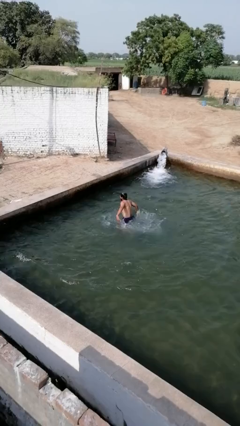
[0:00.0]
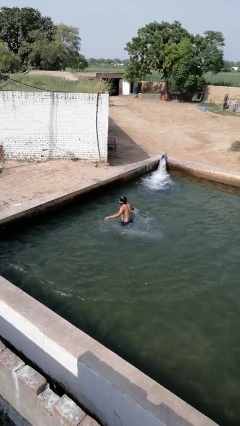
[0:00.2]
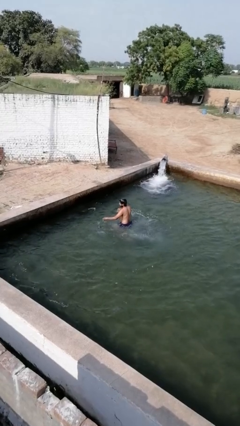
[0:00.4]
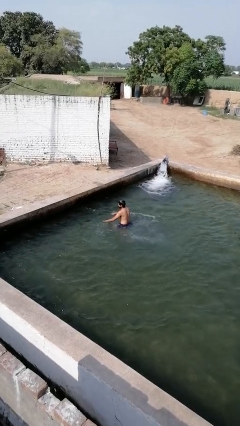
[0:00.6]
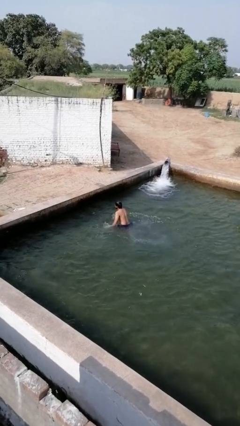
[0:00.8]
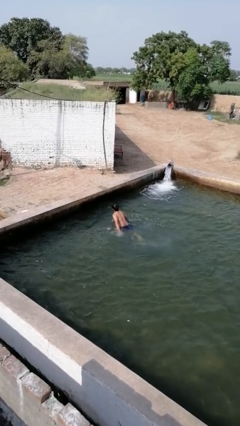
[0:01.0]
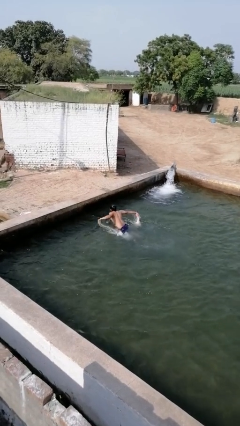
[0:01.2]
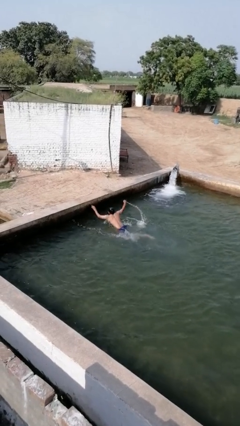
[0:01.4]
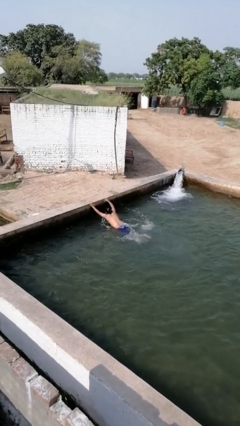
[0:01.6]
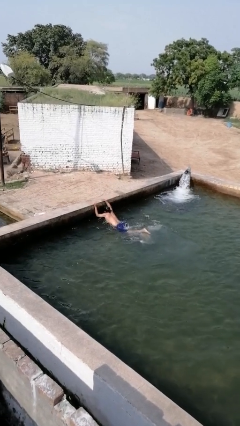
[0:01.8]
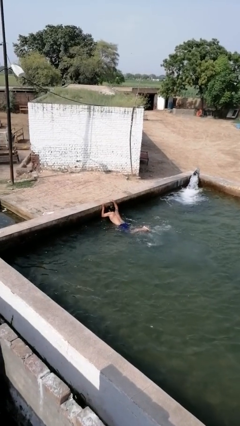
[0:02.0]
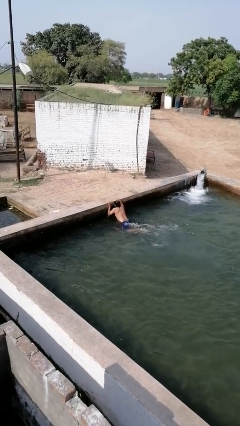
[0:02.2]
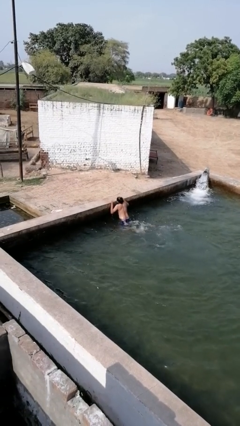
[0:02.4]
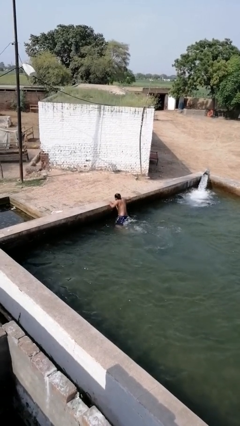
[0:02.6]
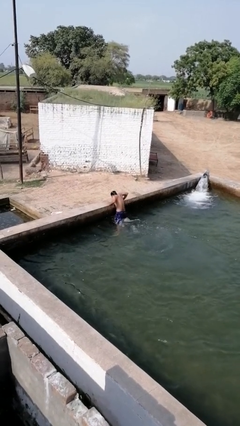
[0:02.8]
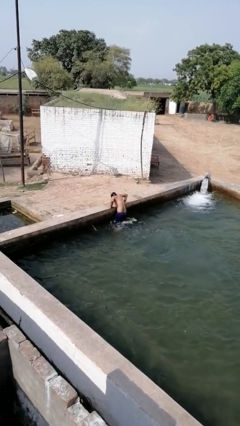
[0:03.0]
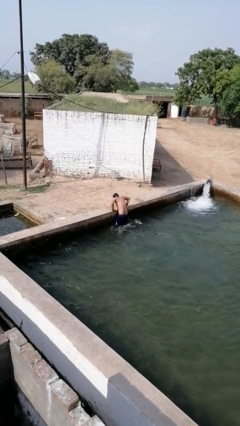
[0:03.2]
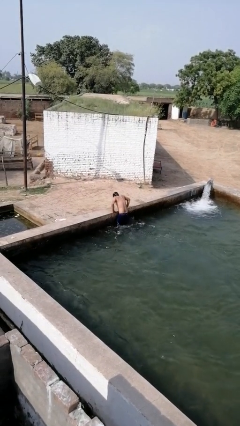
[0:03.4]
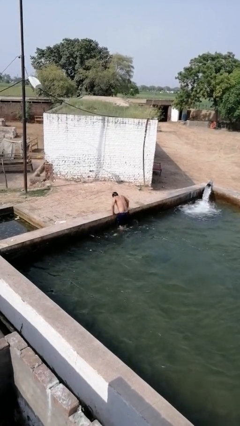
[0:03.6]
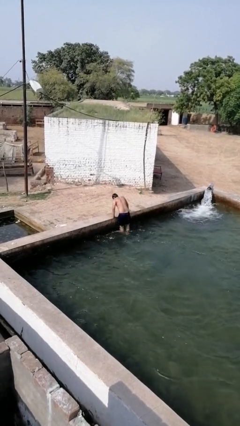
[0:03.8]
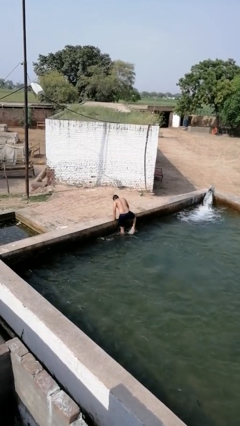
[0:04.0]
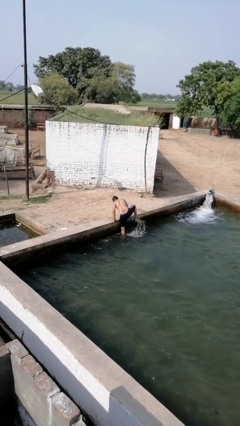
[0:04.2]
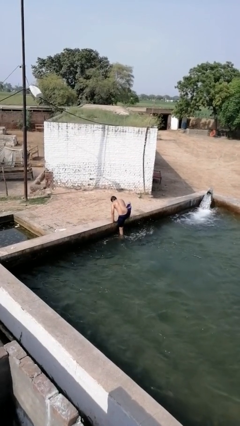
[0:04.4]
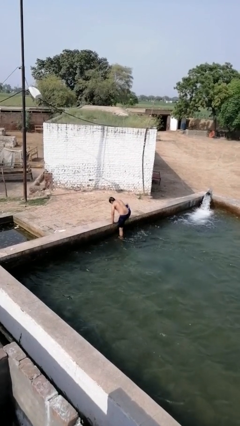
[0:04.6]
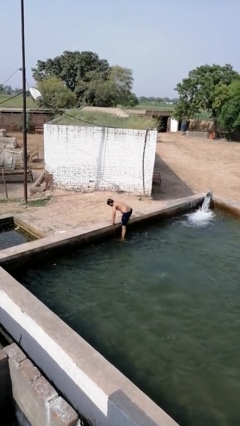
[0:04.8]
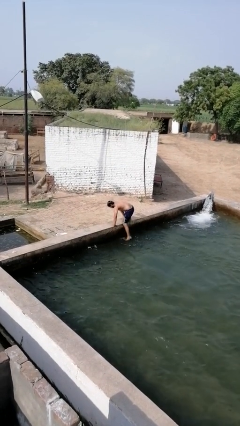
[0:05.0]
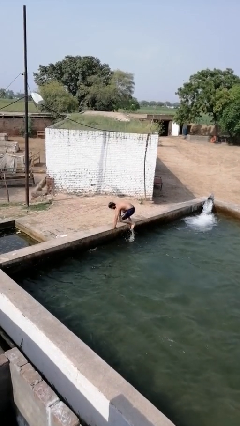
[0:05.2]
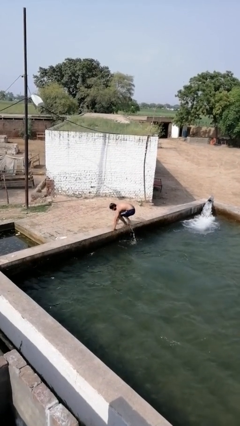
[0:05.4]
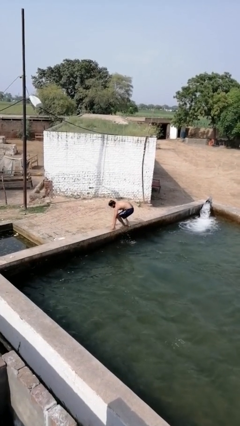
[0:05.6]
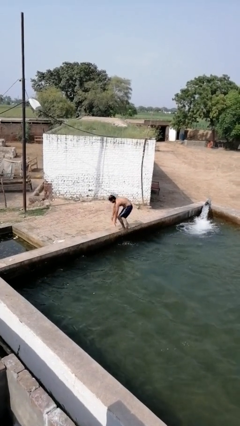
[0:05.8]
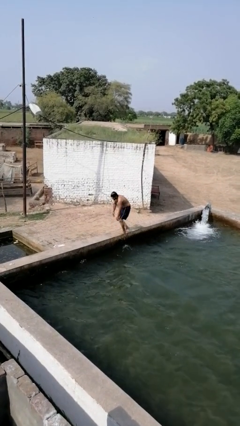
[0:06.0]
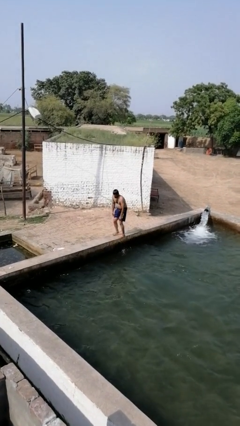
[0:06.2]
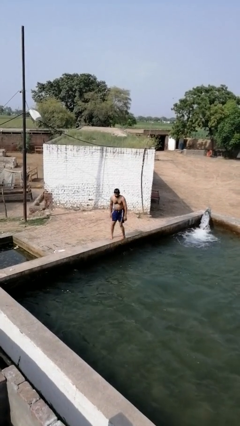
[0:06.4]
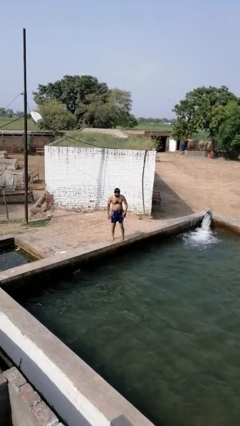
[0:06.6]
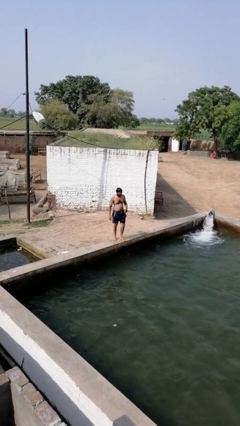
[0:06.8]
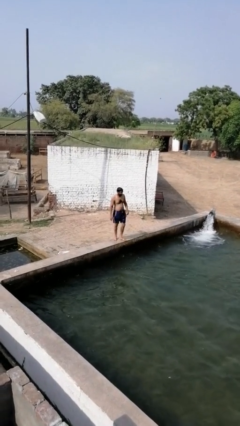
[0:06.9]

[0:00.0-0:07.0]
person exits pool

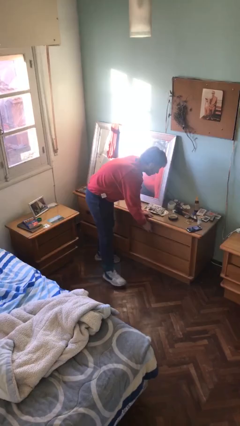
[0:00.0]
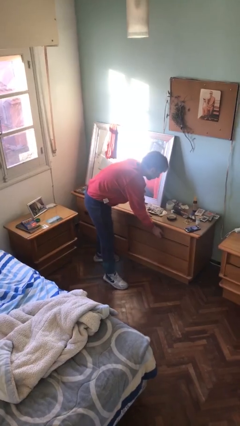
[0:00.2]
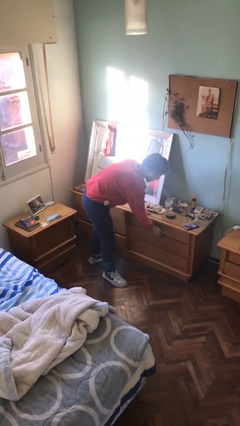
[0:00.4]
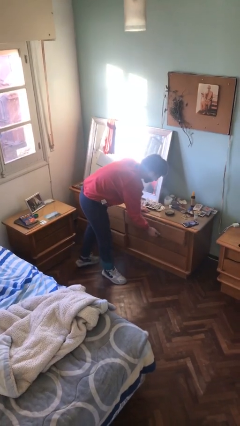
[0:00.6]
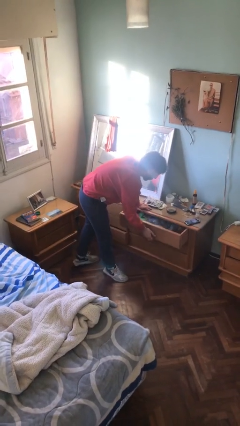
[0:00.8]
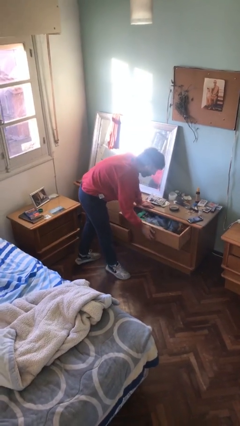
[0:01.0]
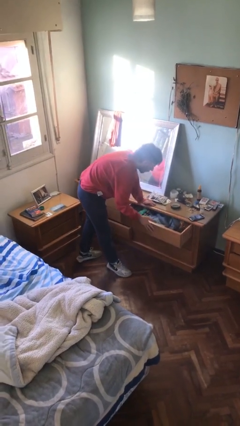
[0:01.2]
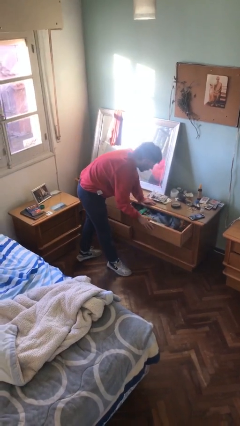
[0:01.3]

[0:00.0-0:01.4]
person opens dresser drawer

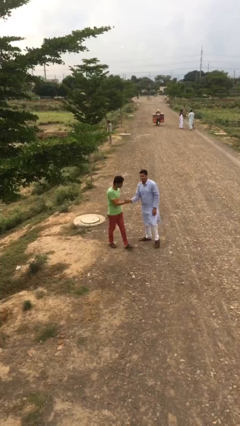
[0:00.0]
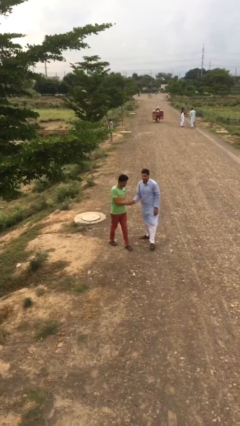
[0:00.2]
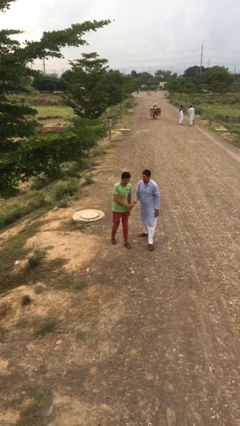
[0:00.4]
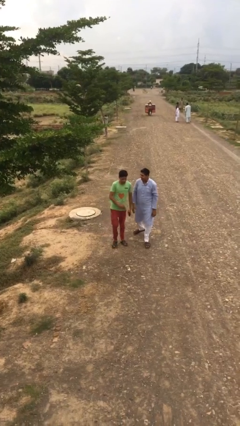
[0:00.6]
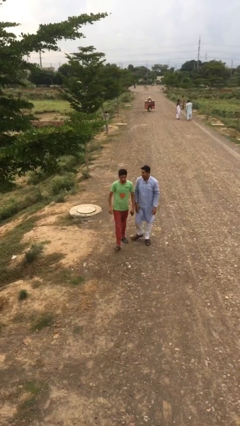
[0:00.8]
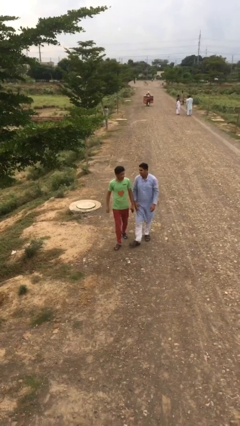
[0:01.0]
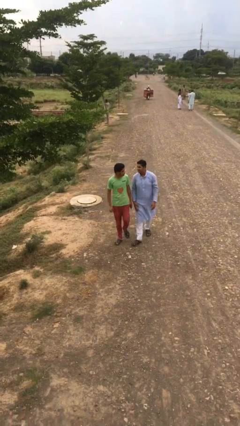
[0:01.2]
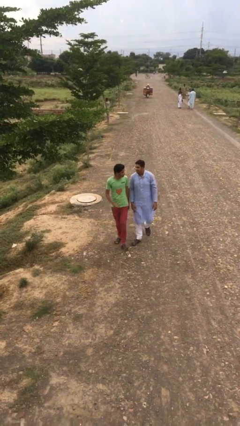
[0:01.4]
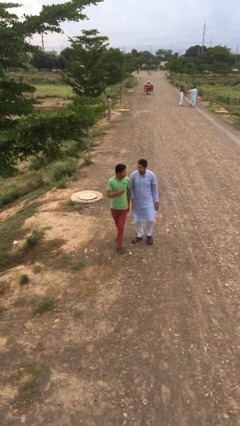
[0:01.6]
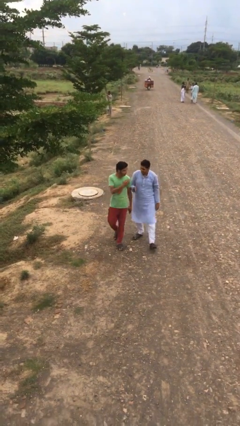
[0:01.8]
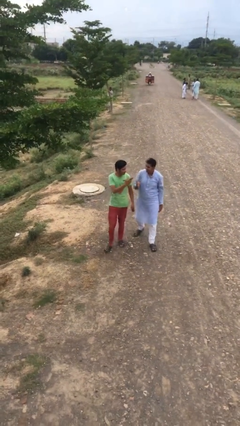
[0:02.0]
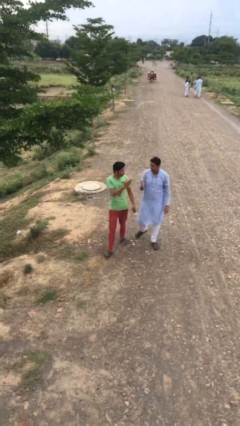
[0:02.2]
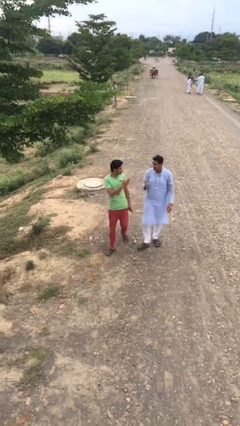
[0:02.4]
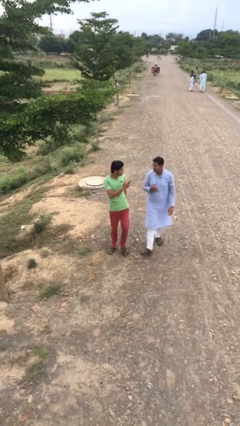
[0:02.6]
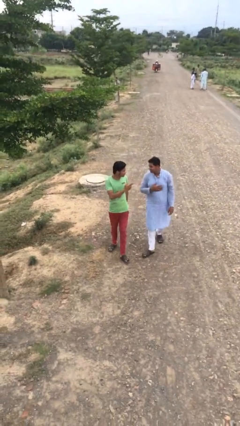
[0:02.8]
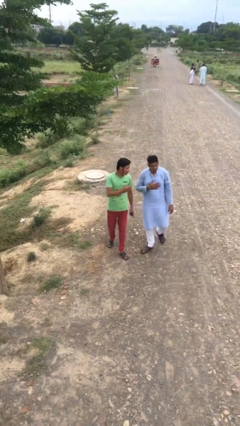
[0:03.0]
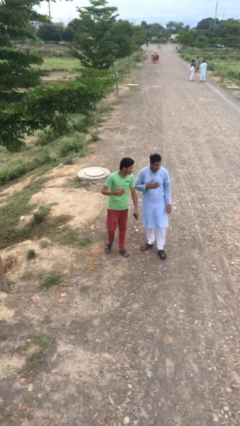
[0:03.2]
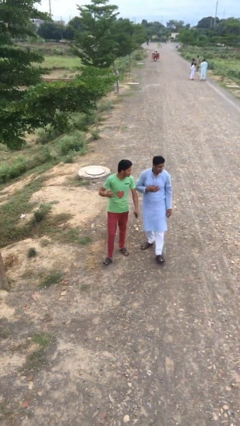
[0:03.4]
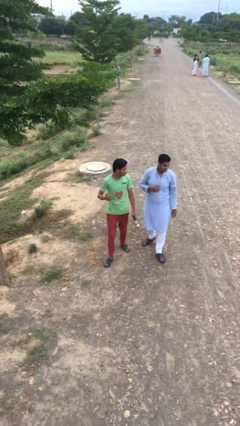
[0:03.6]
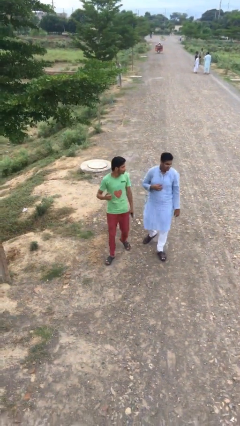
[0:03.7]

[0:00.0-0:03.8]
person talks to person

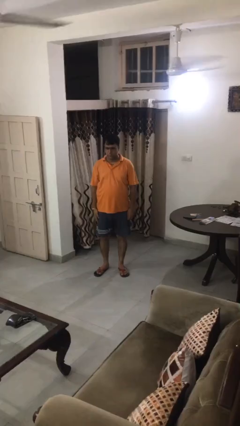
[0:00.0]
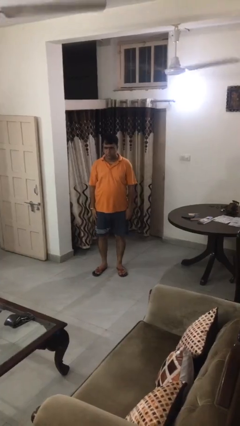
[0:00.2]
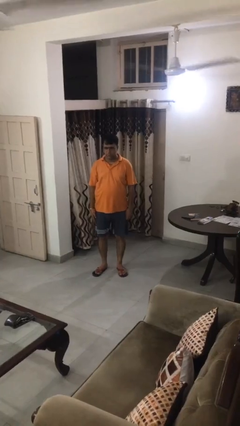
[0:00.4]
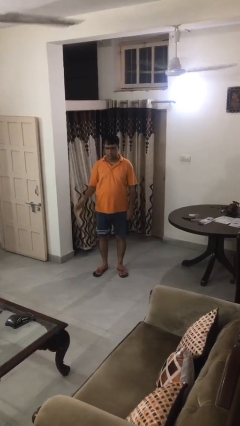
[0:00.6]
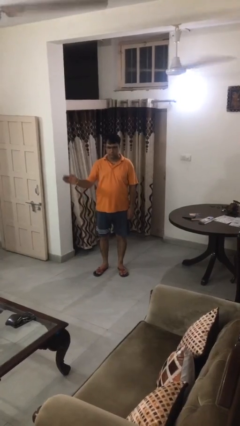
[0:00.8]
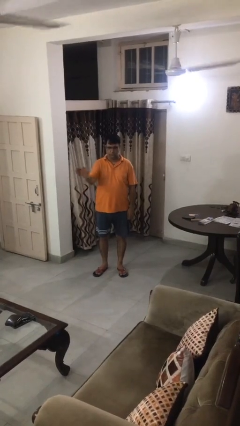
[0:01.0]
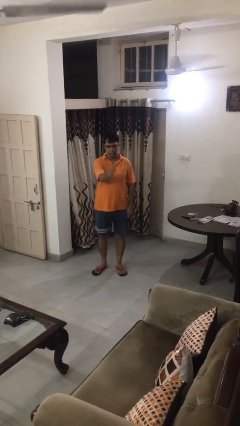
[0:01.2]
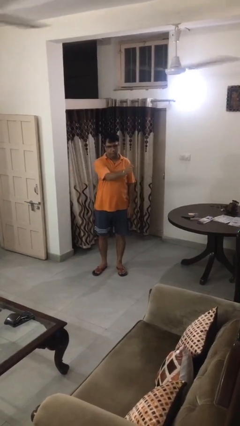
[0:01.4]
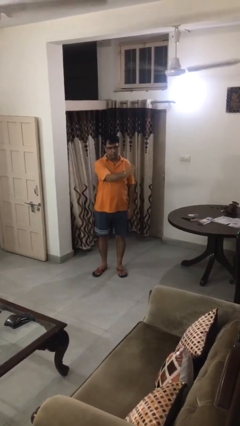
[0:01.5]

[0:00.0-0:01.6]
person gestures swipe left

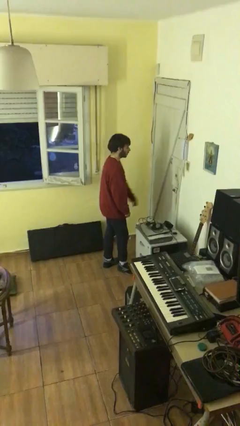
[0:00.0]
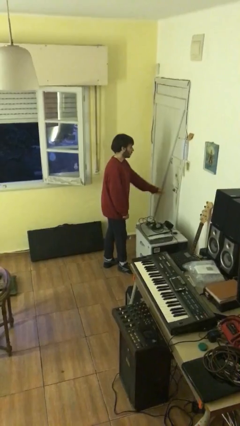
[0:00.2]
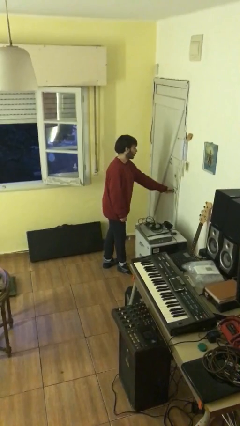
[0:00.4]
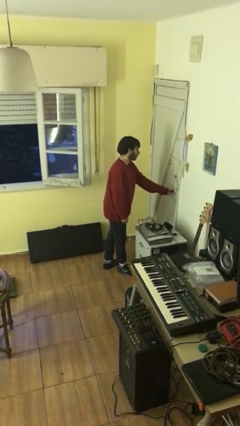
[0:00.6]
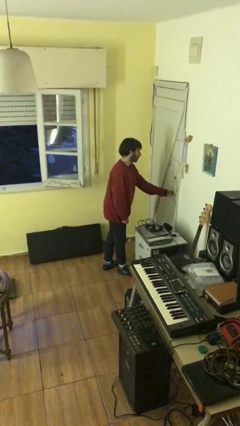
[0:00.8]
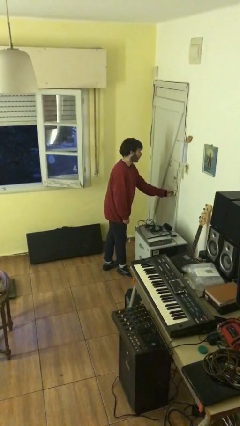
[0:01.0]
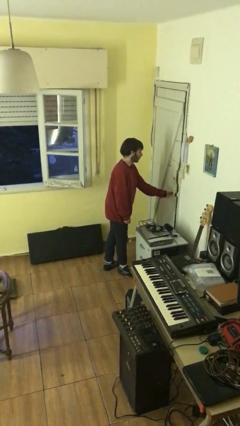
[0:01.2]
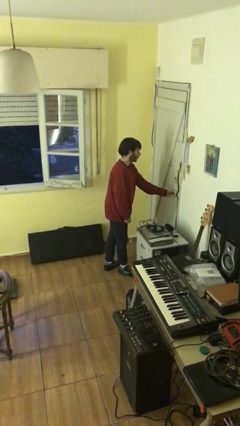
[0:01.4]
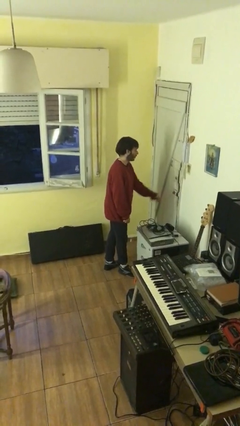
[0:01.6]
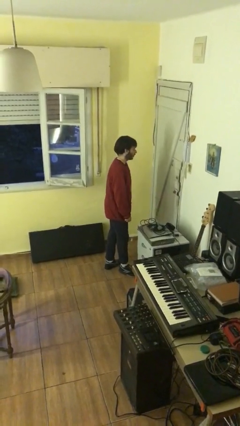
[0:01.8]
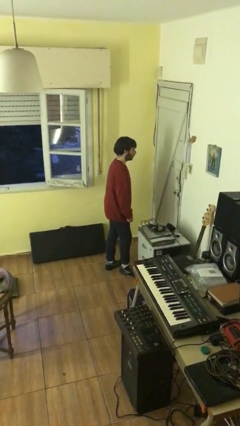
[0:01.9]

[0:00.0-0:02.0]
person unlocks door with keys

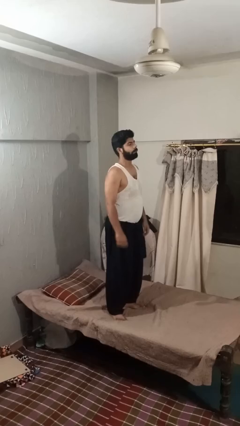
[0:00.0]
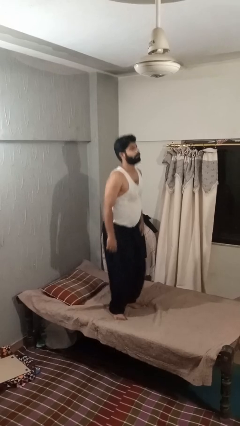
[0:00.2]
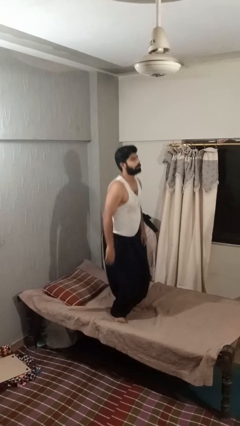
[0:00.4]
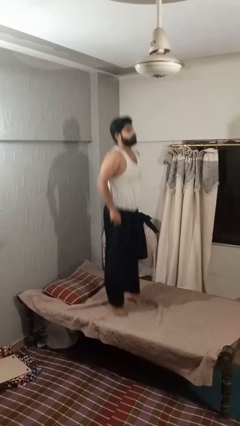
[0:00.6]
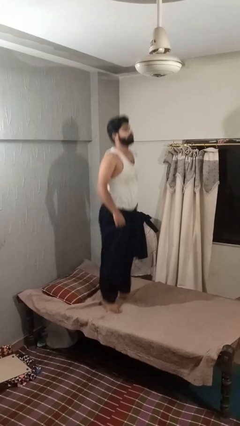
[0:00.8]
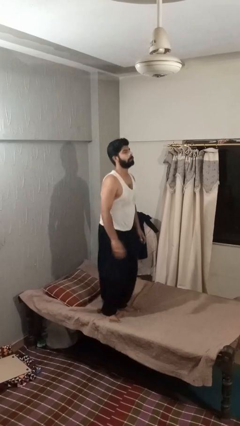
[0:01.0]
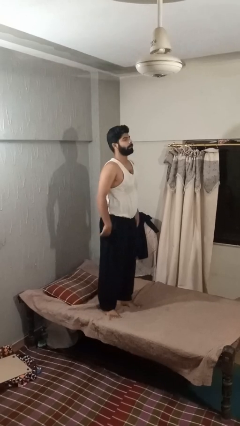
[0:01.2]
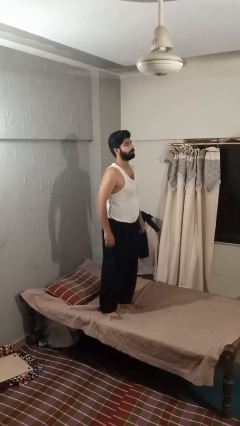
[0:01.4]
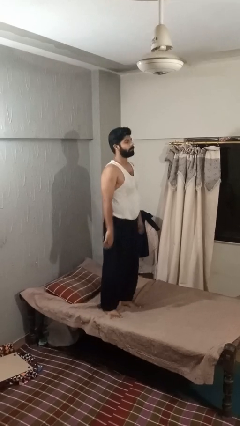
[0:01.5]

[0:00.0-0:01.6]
person jumps on bed
